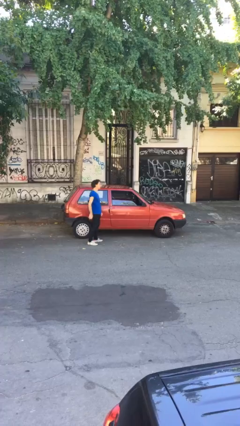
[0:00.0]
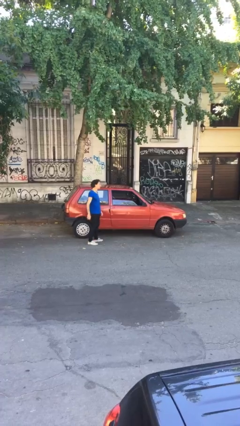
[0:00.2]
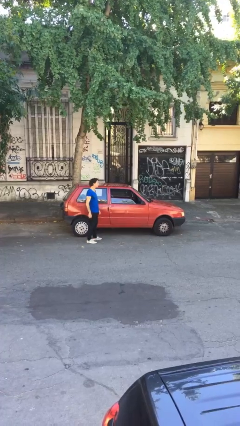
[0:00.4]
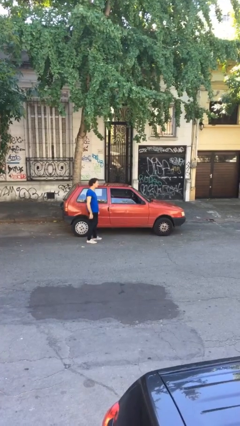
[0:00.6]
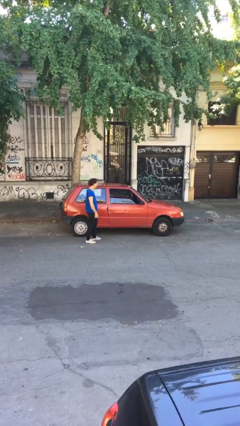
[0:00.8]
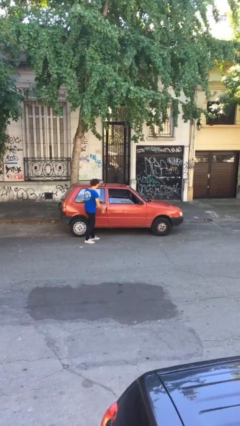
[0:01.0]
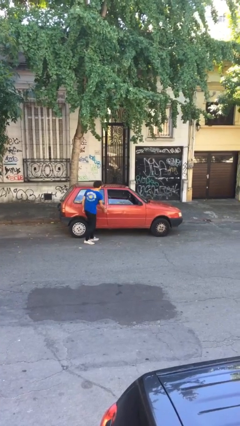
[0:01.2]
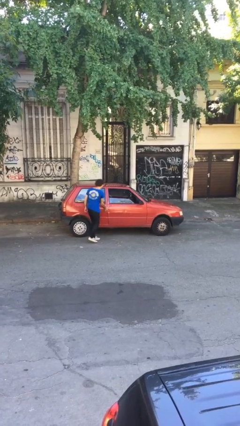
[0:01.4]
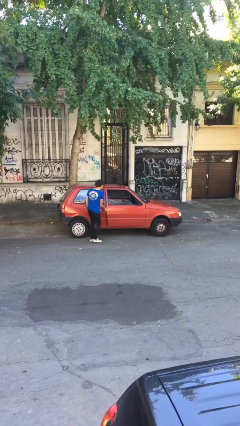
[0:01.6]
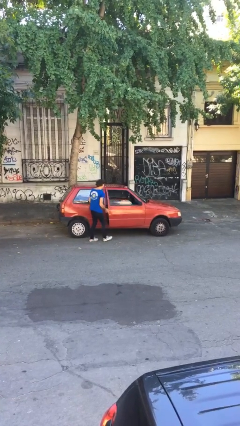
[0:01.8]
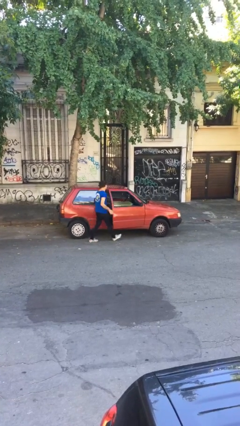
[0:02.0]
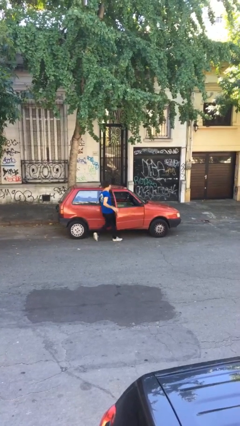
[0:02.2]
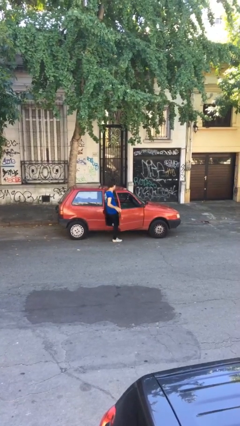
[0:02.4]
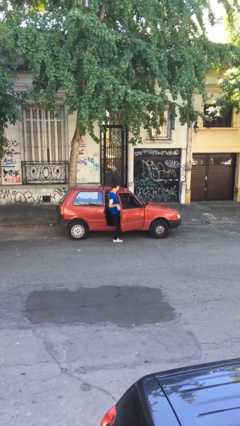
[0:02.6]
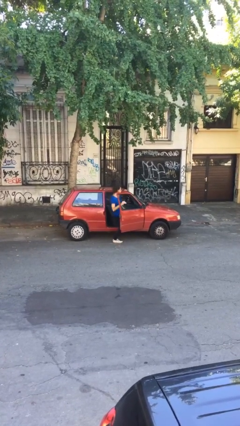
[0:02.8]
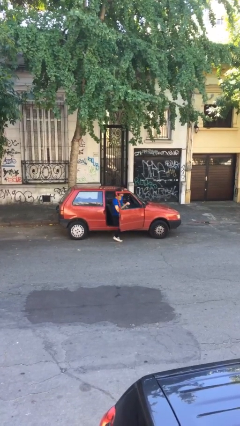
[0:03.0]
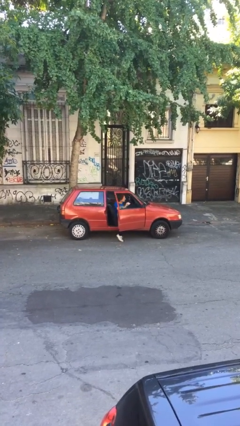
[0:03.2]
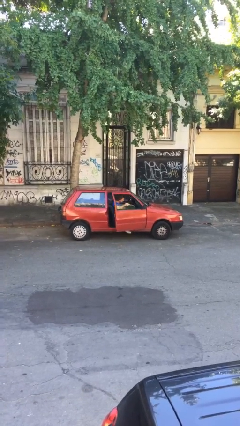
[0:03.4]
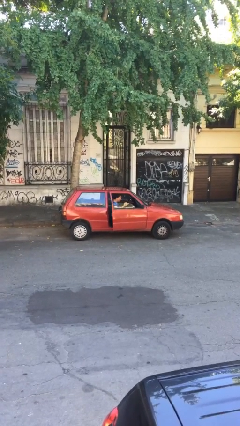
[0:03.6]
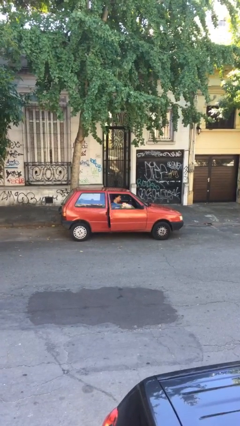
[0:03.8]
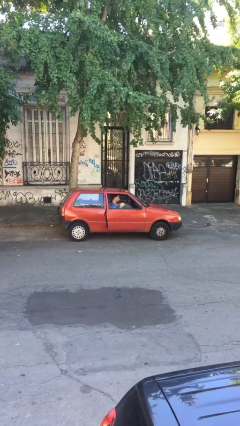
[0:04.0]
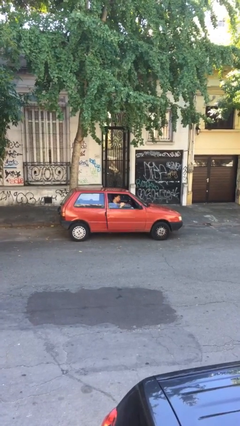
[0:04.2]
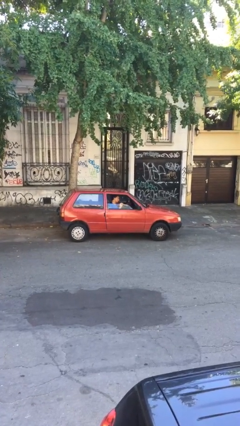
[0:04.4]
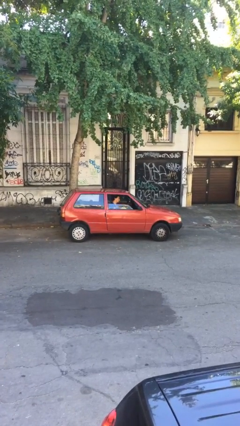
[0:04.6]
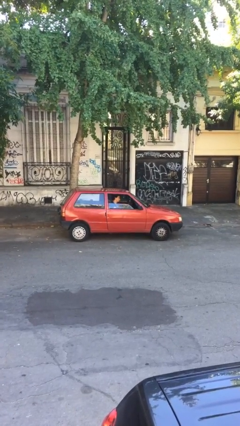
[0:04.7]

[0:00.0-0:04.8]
car picks up person

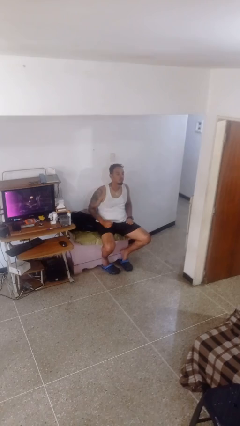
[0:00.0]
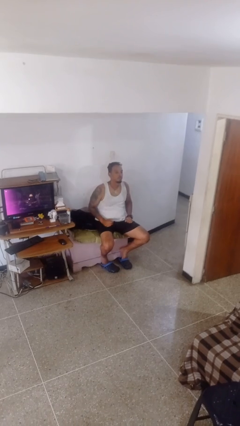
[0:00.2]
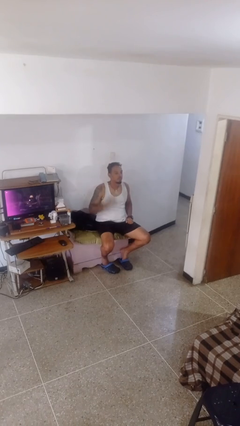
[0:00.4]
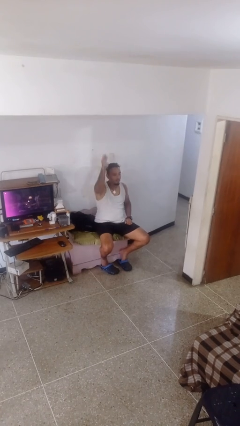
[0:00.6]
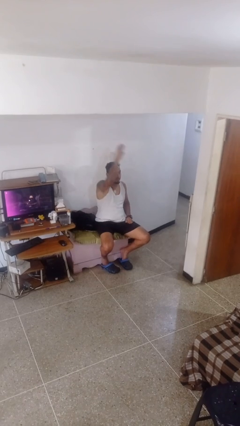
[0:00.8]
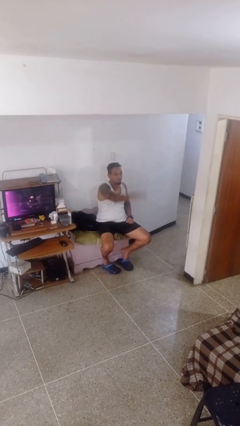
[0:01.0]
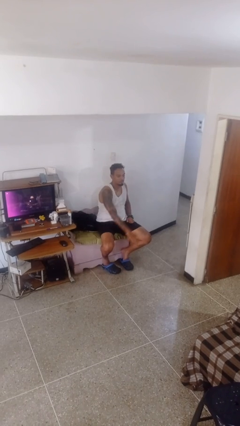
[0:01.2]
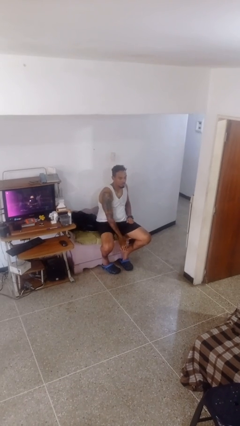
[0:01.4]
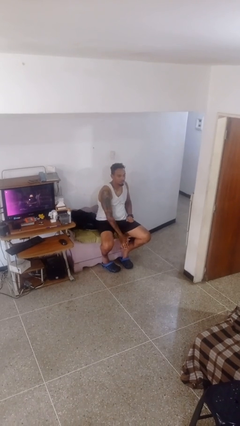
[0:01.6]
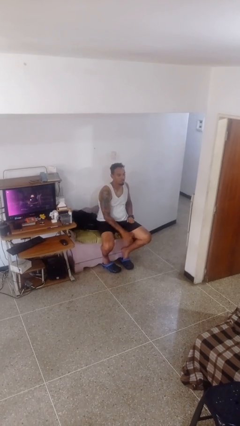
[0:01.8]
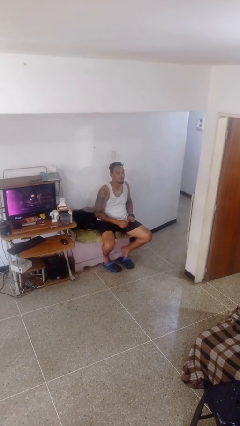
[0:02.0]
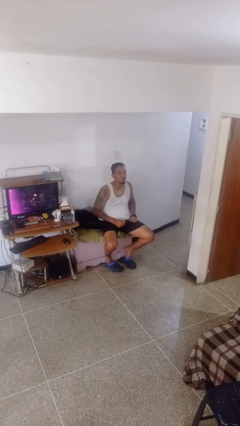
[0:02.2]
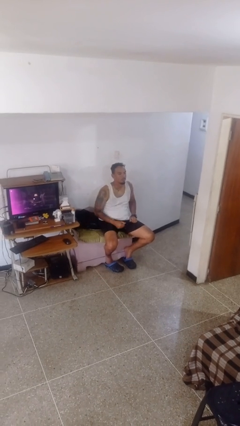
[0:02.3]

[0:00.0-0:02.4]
person gestures swipe down

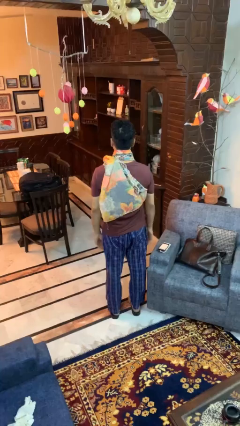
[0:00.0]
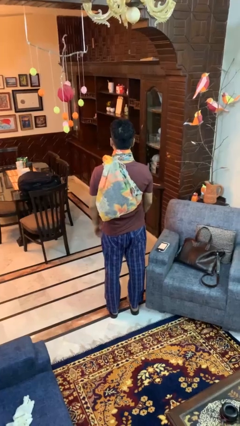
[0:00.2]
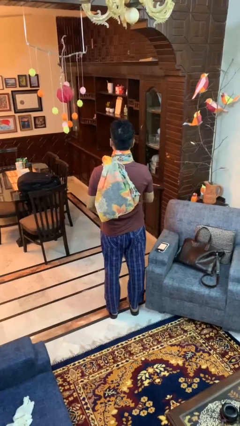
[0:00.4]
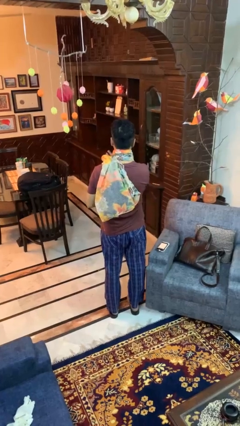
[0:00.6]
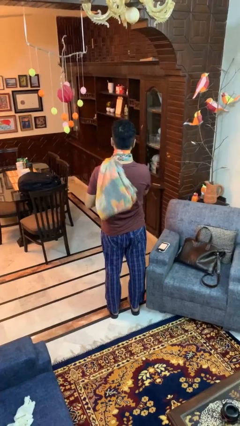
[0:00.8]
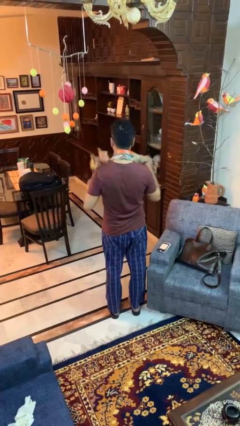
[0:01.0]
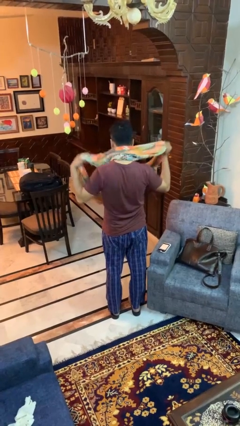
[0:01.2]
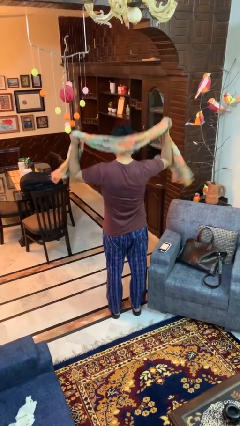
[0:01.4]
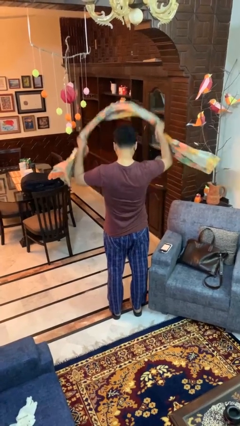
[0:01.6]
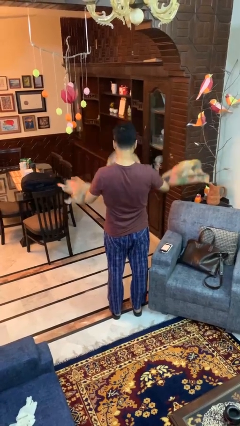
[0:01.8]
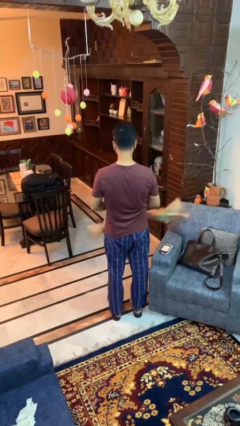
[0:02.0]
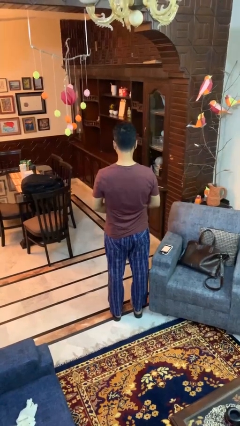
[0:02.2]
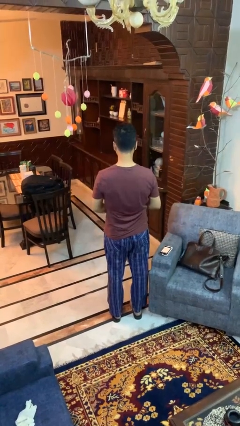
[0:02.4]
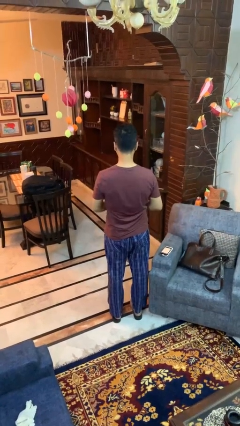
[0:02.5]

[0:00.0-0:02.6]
person takes off scarf

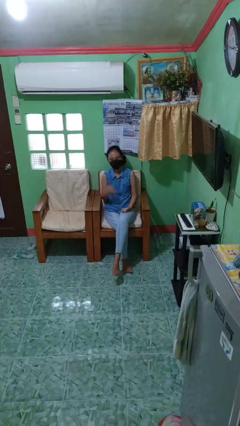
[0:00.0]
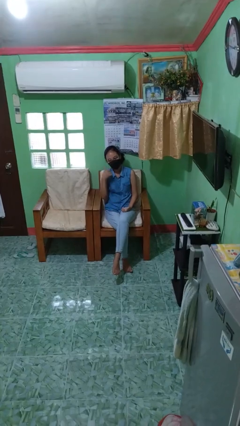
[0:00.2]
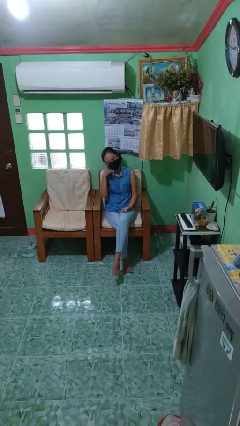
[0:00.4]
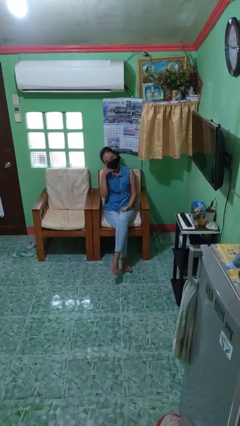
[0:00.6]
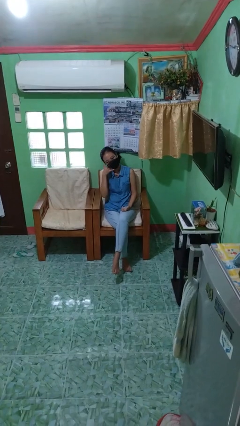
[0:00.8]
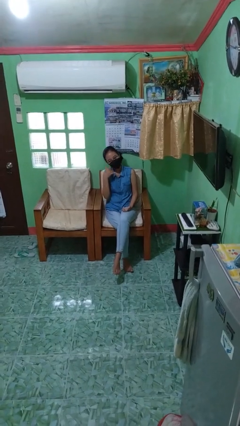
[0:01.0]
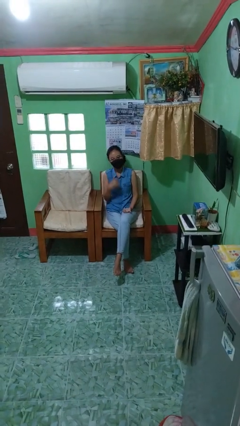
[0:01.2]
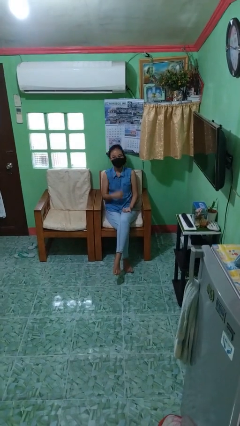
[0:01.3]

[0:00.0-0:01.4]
person gestures call me

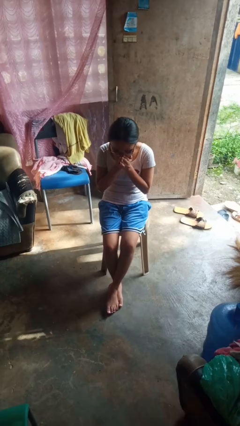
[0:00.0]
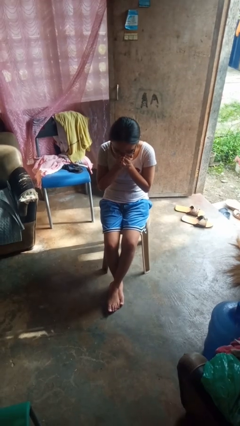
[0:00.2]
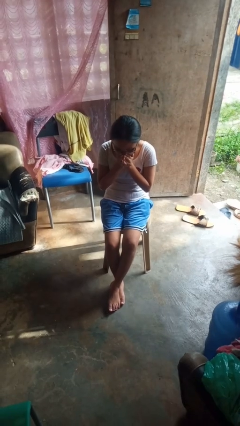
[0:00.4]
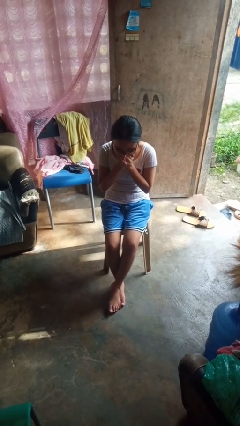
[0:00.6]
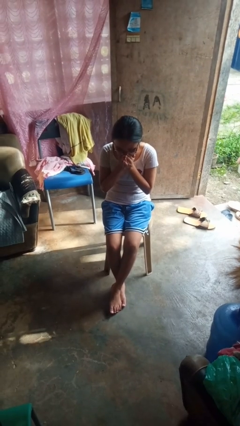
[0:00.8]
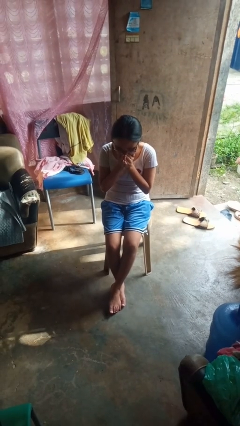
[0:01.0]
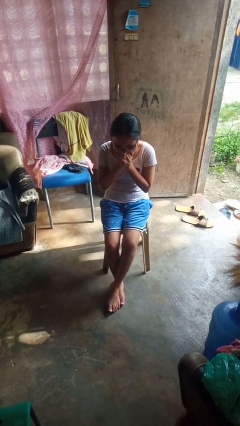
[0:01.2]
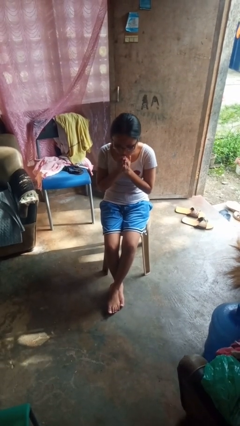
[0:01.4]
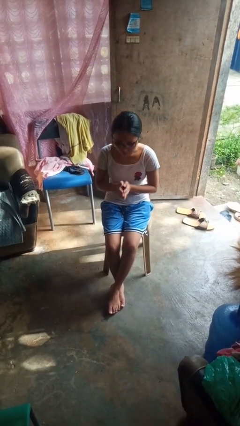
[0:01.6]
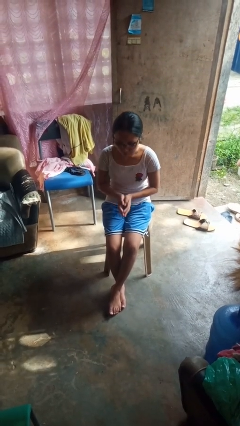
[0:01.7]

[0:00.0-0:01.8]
person sneezes into hand

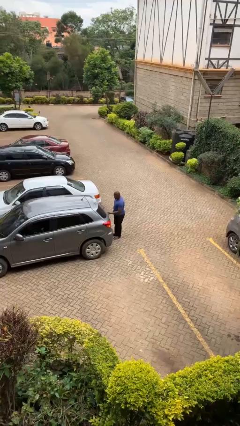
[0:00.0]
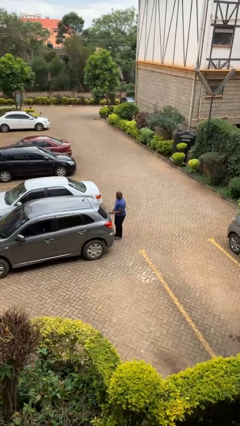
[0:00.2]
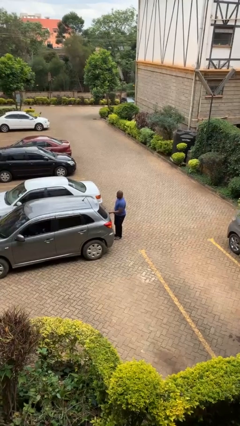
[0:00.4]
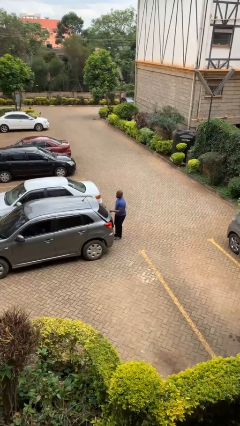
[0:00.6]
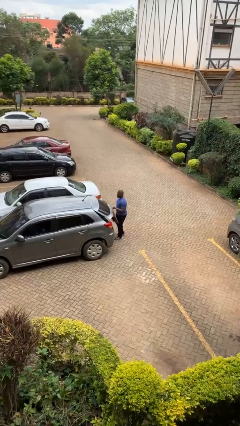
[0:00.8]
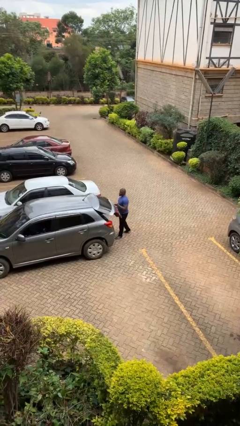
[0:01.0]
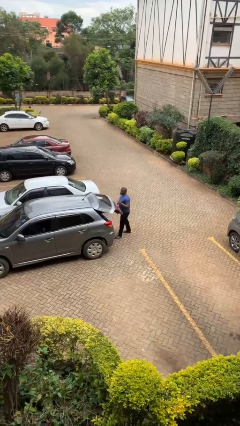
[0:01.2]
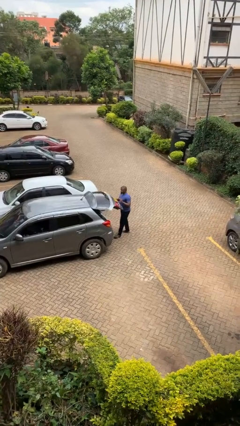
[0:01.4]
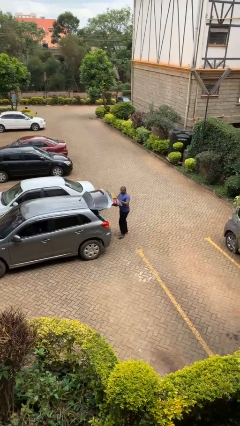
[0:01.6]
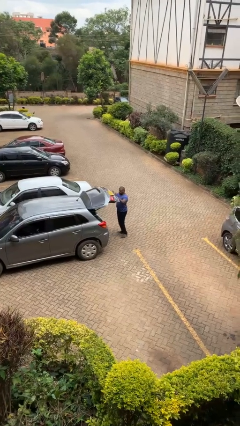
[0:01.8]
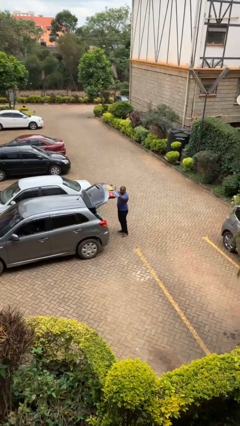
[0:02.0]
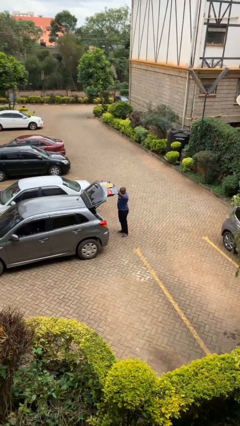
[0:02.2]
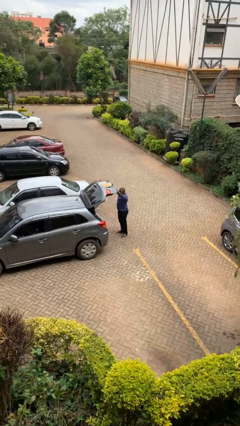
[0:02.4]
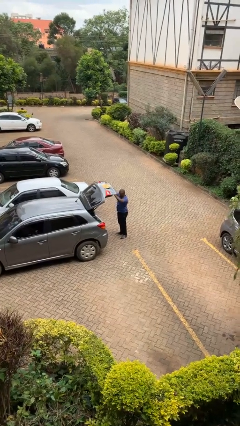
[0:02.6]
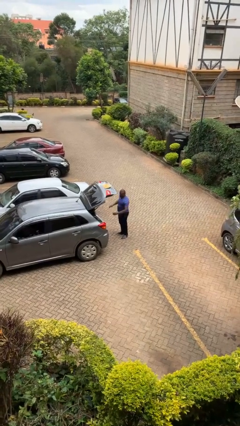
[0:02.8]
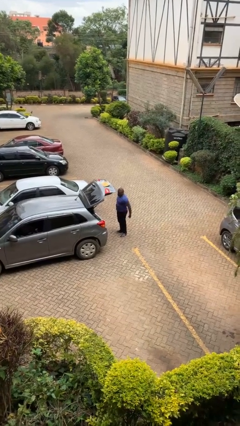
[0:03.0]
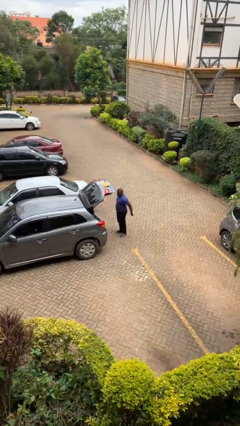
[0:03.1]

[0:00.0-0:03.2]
person opens car trunk

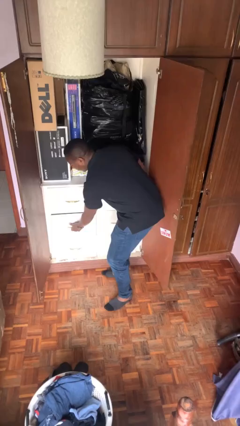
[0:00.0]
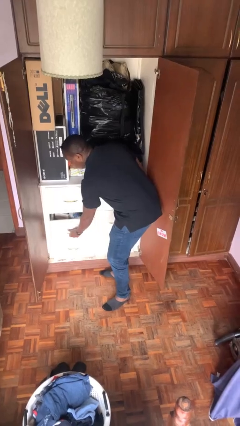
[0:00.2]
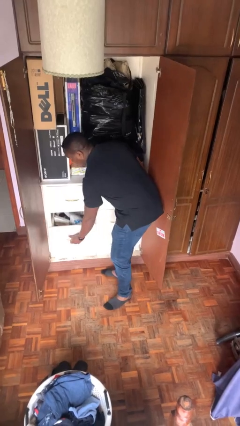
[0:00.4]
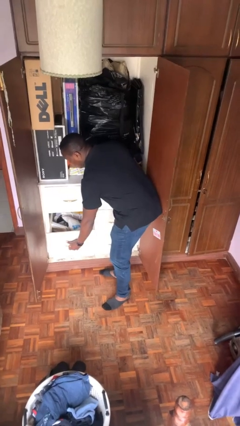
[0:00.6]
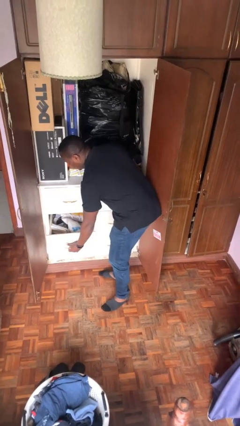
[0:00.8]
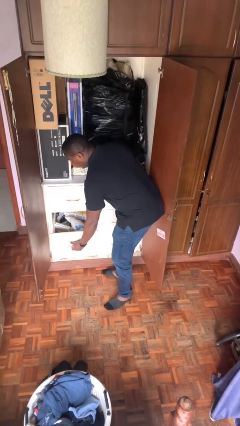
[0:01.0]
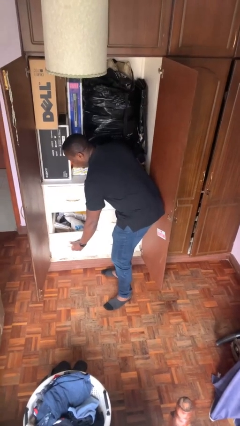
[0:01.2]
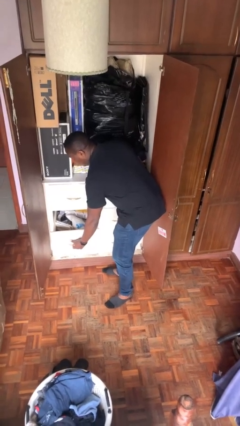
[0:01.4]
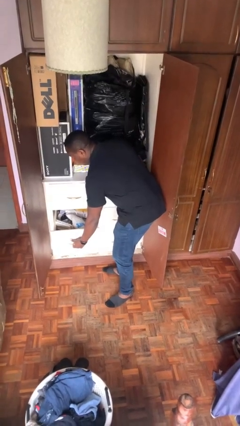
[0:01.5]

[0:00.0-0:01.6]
person opens dresser drawer
